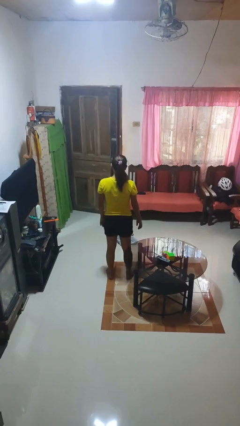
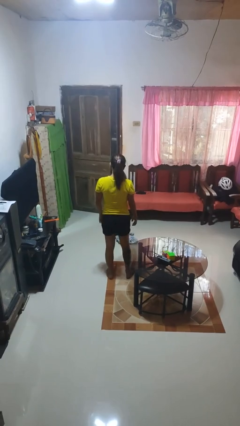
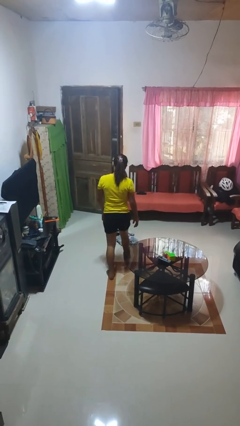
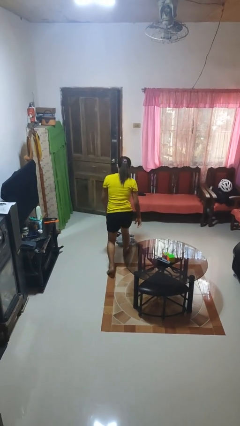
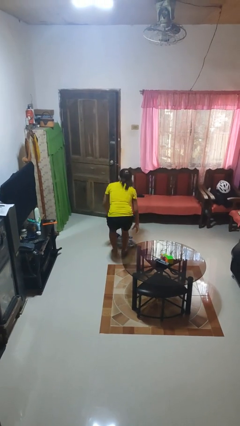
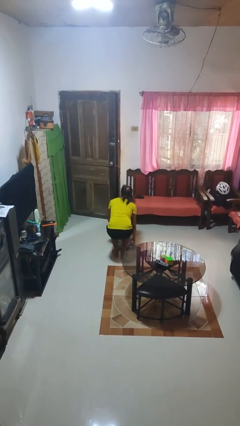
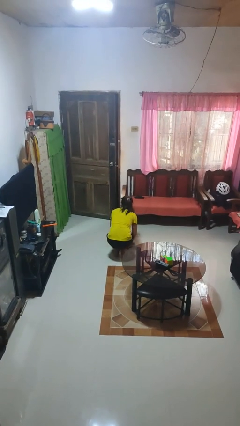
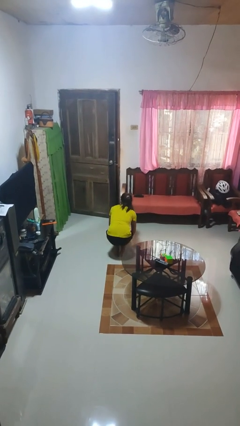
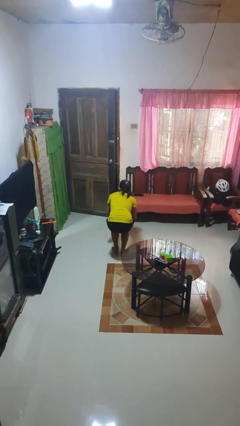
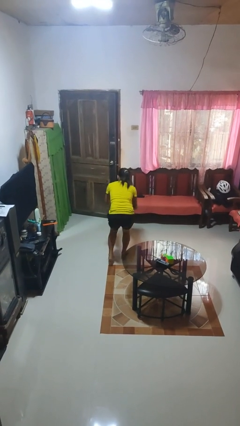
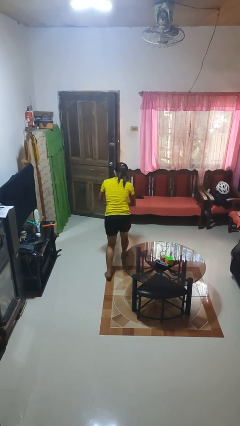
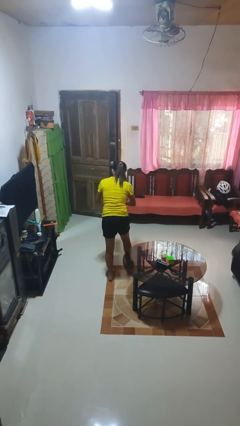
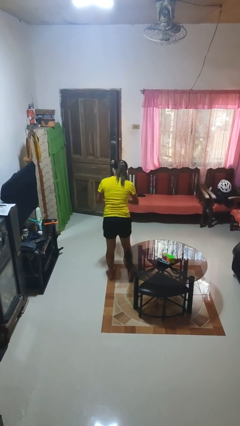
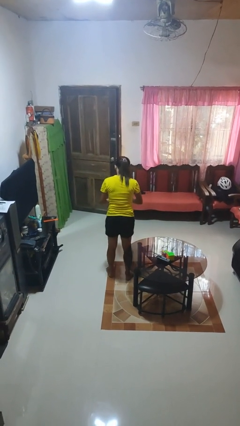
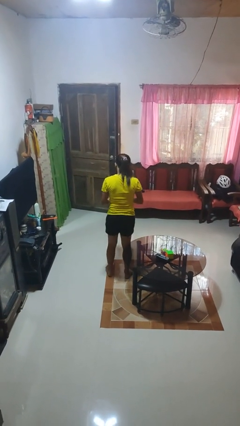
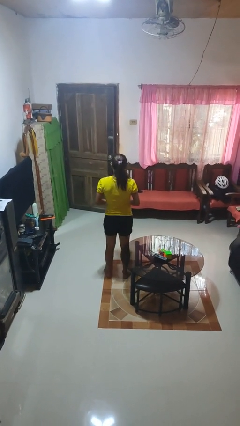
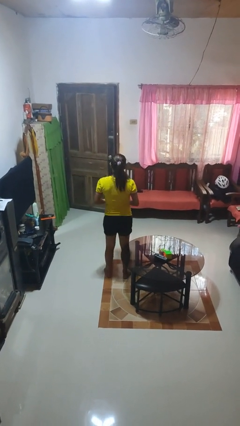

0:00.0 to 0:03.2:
person picks up object from floor

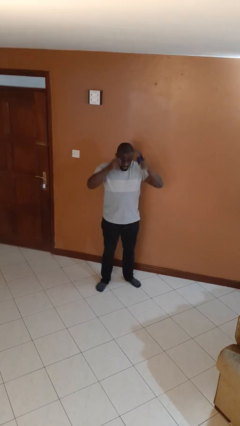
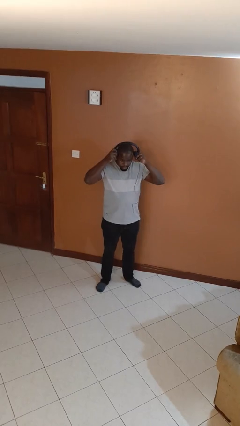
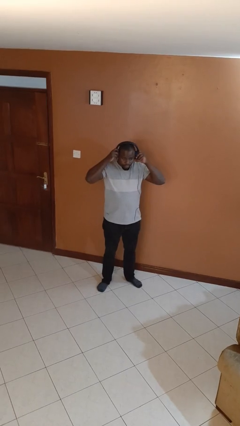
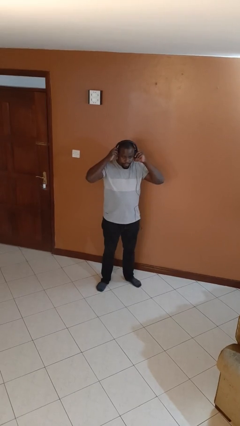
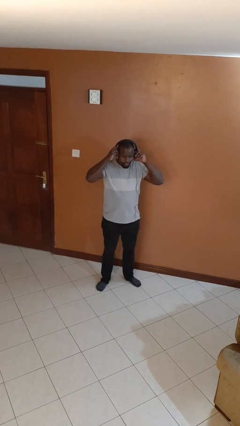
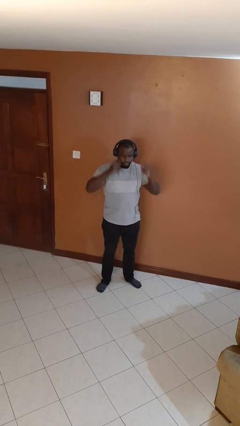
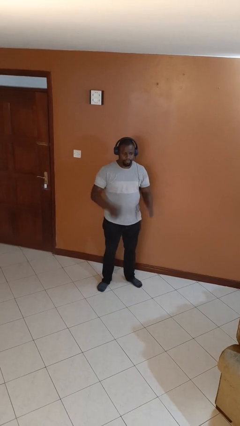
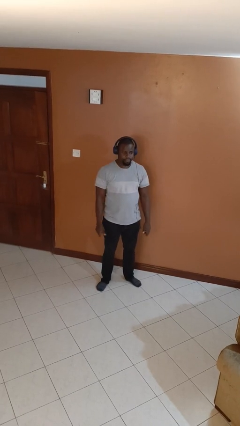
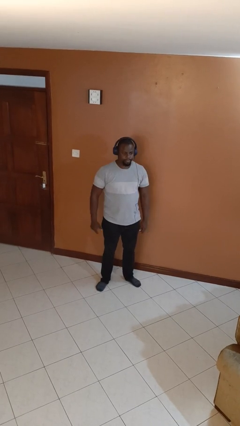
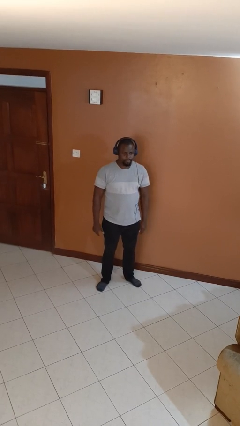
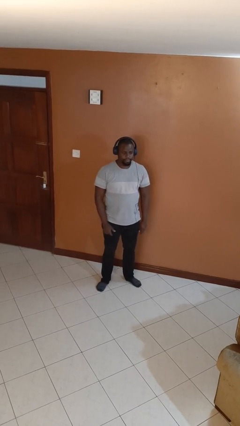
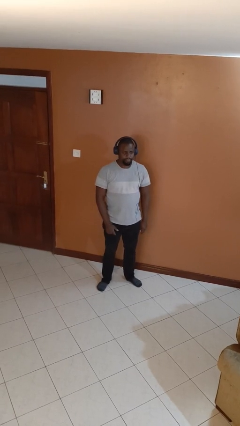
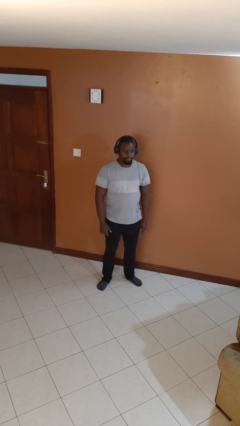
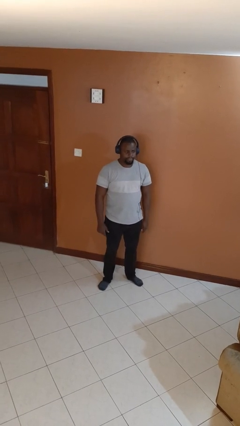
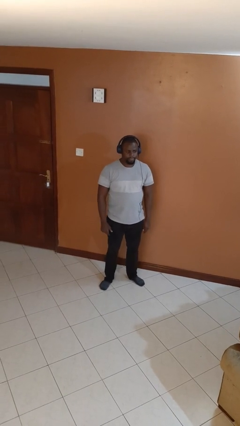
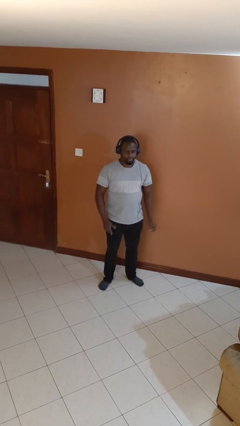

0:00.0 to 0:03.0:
person puts on headphones

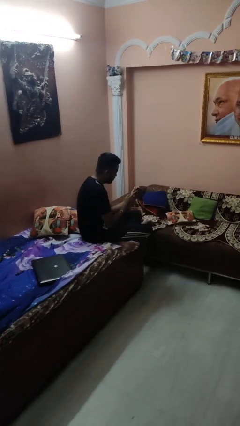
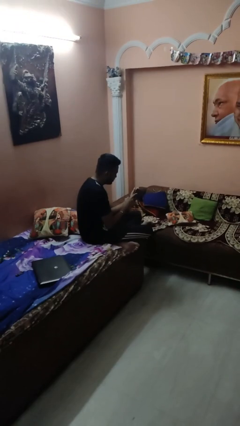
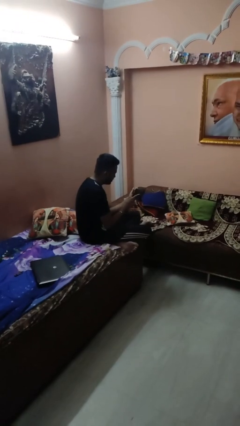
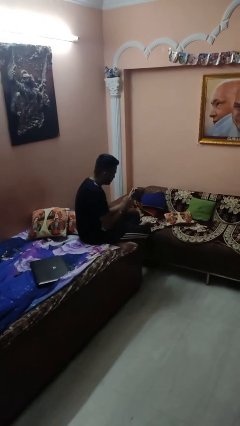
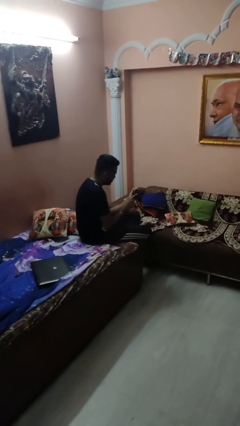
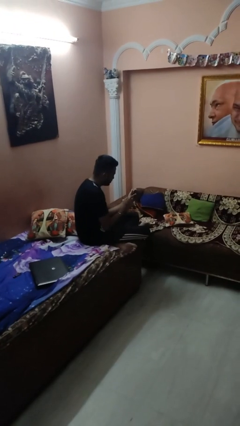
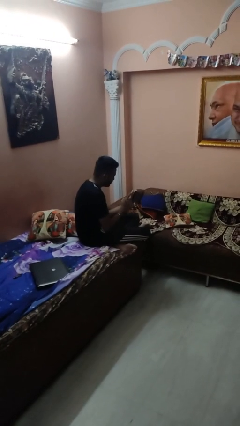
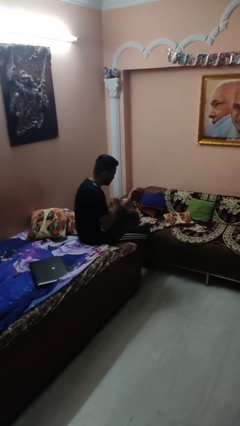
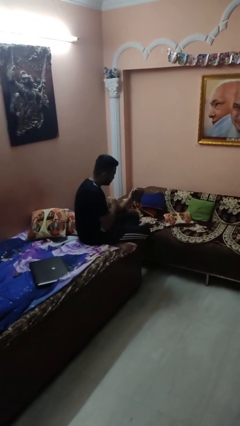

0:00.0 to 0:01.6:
person interacts with tablet

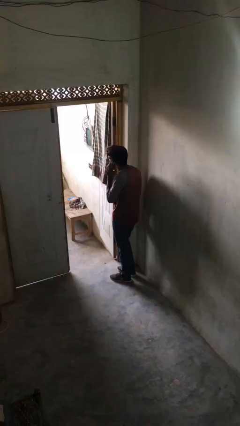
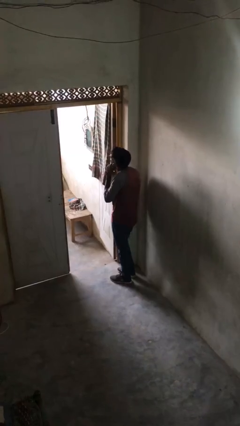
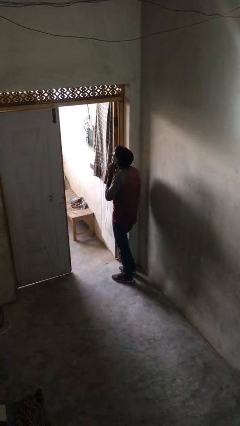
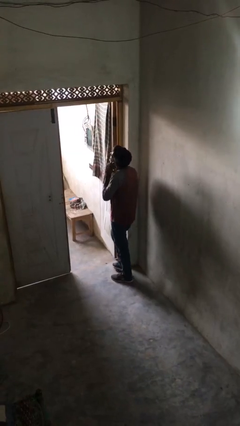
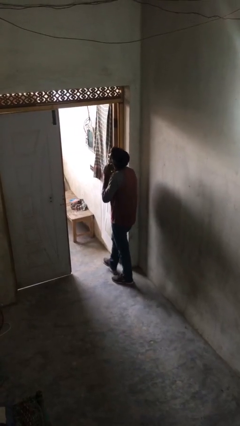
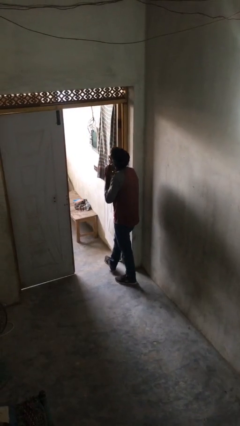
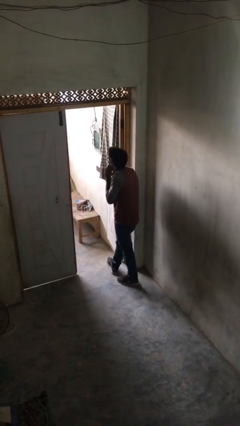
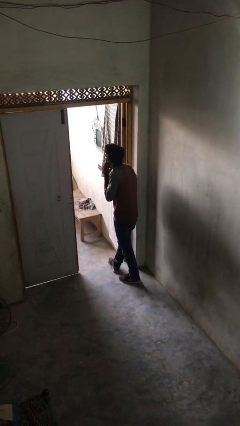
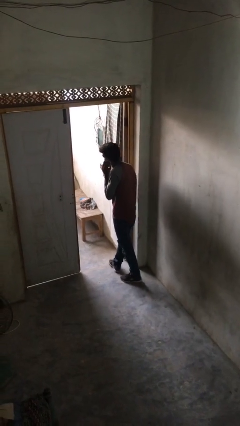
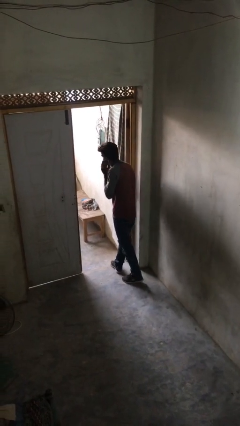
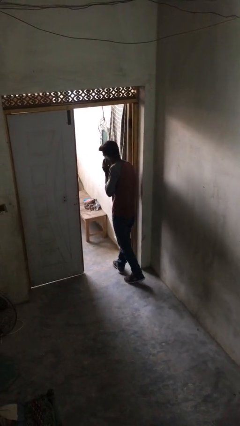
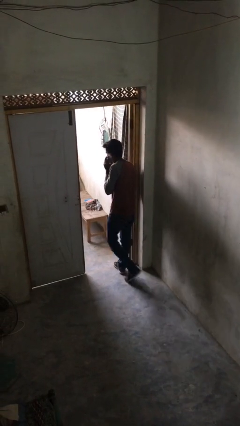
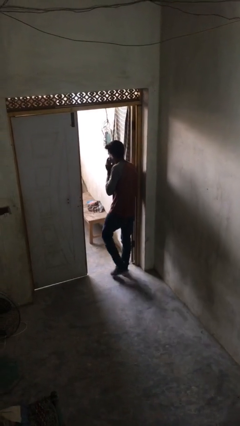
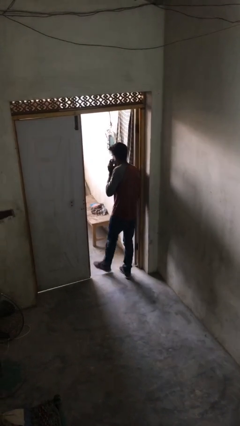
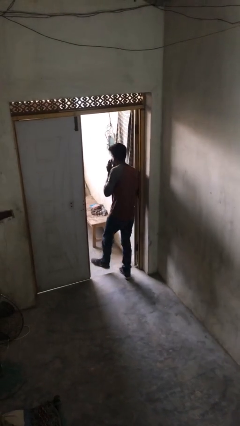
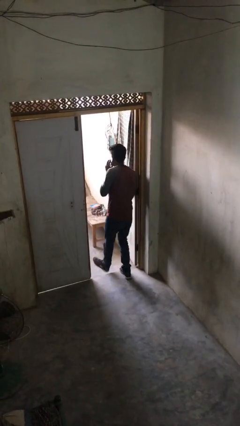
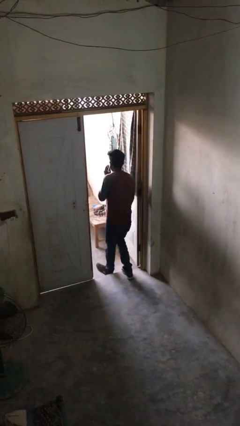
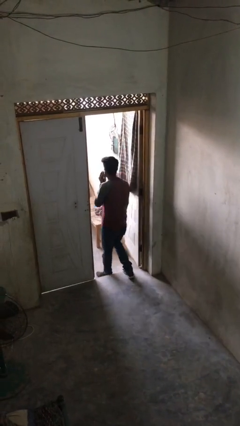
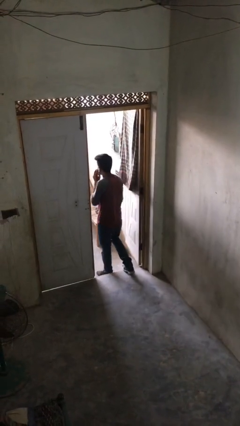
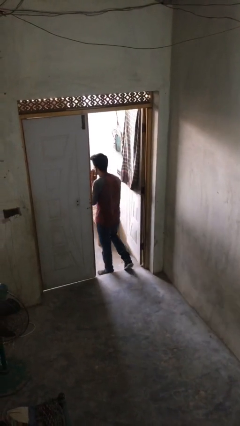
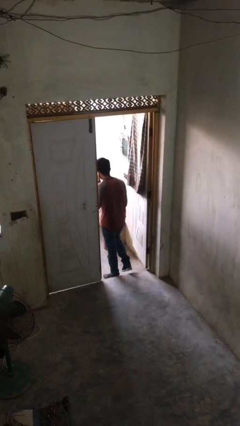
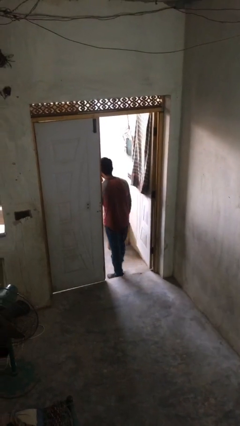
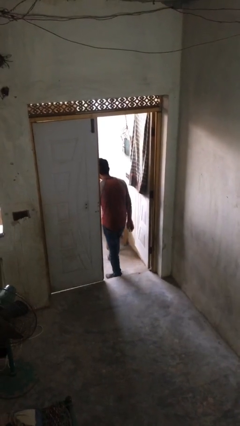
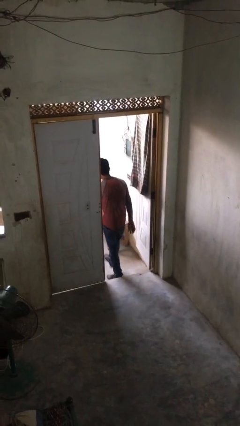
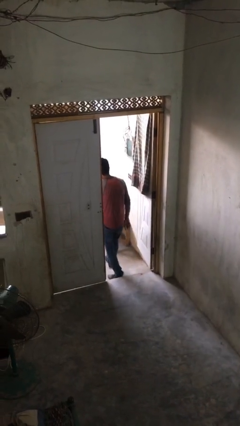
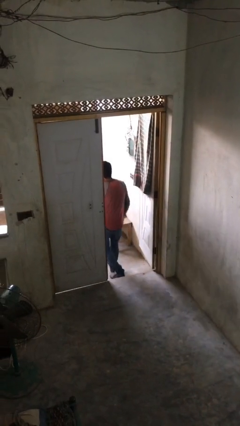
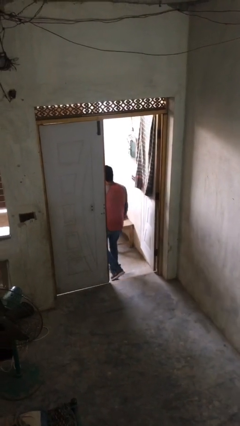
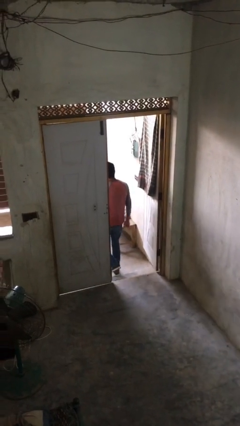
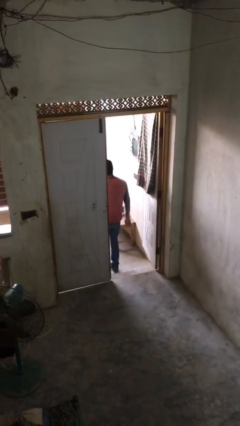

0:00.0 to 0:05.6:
person exits scene through structure

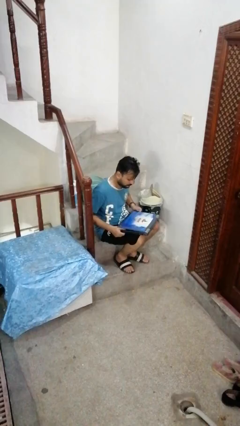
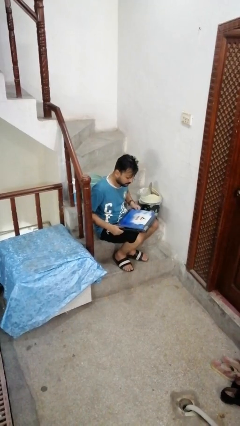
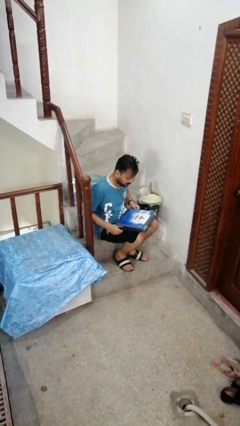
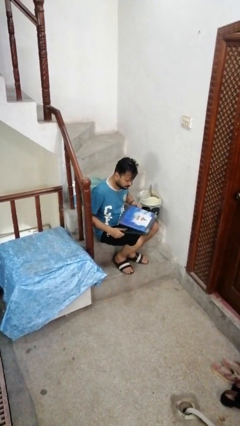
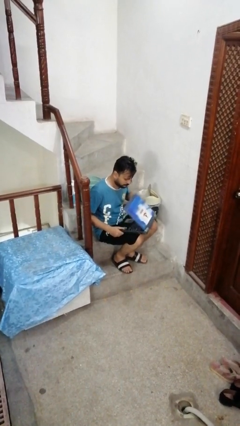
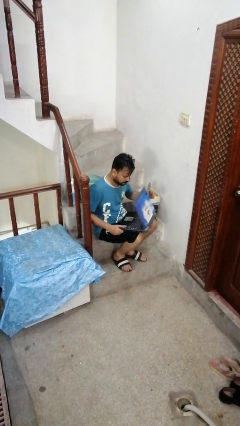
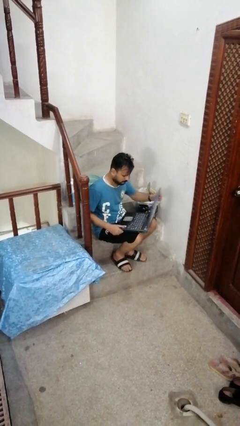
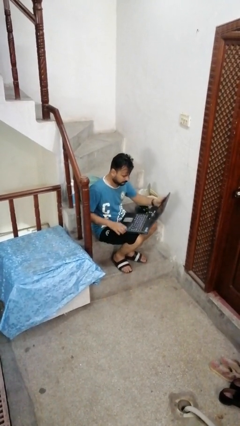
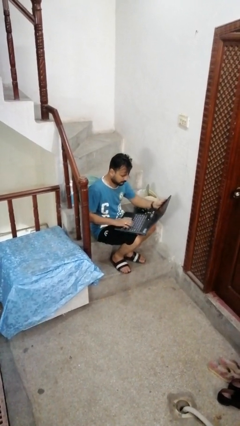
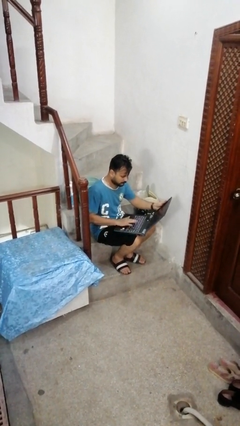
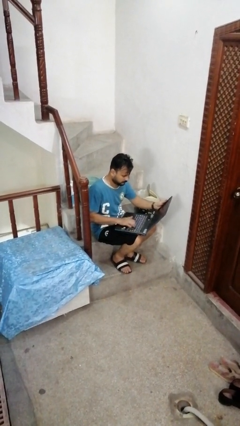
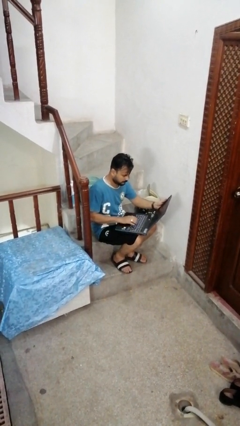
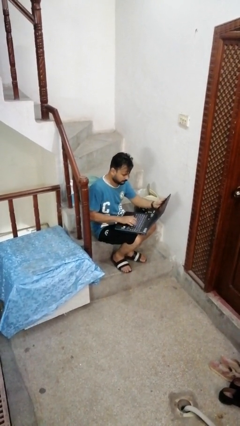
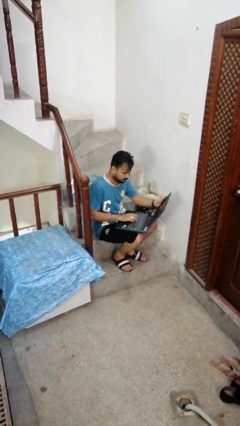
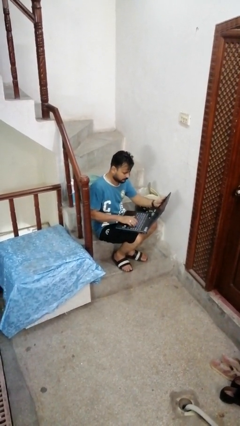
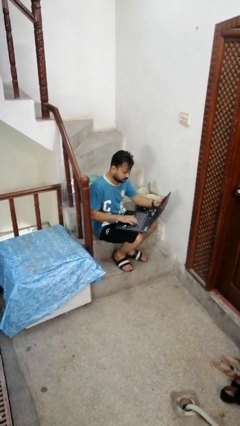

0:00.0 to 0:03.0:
person opens laptop

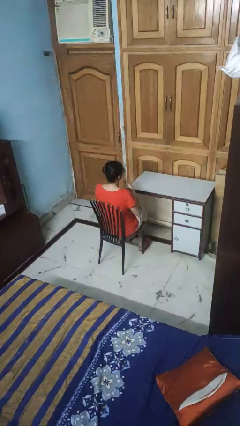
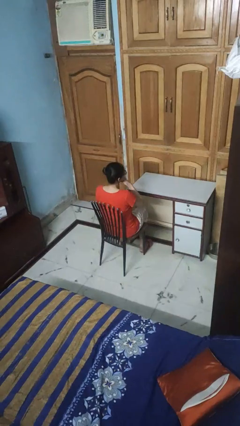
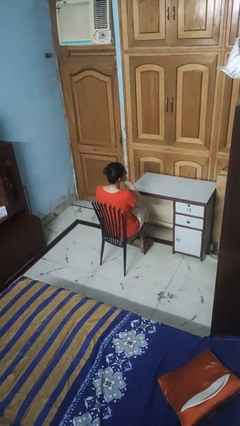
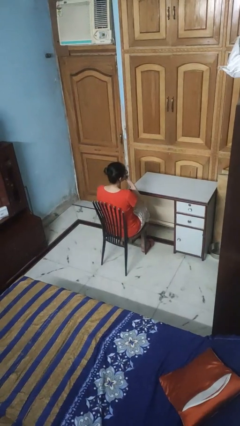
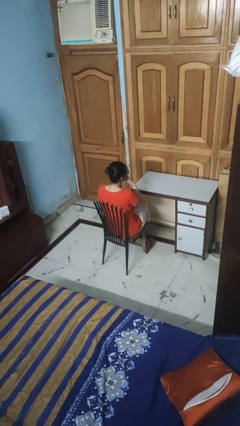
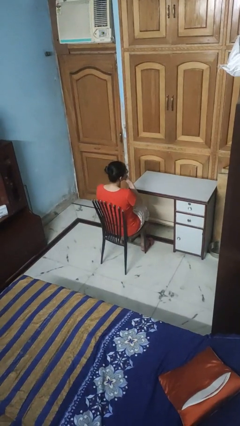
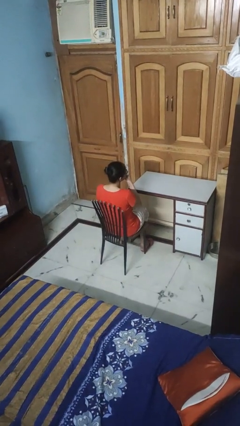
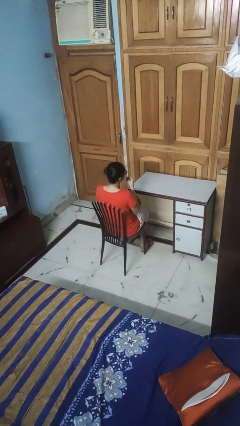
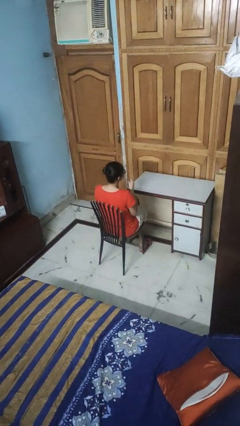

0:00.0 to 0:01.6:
person strokes chin
